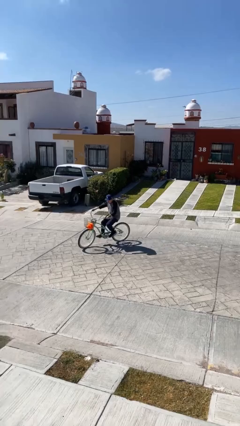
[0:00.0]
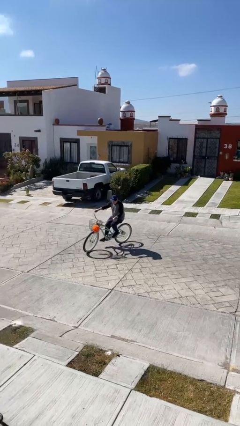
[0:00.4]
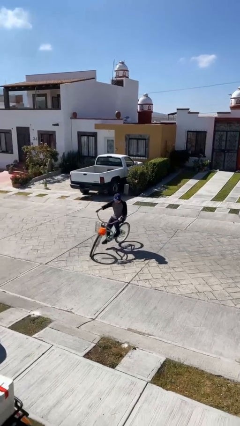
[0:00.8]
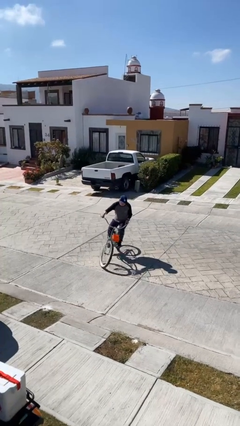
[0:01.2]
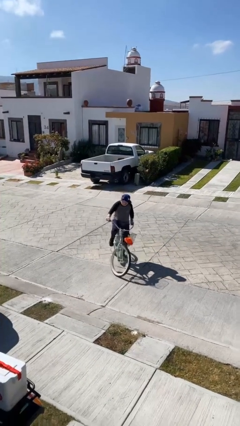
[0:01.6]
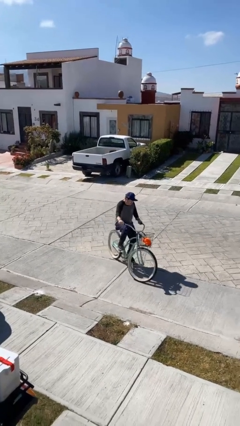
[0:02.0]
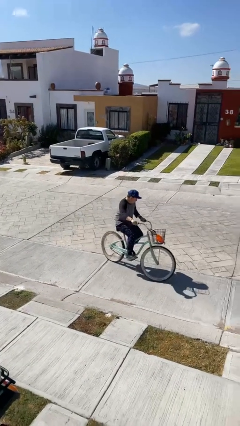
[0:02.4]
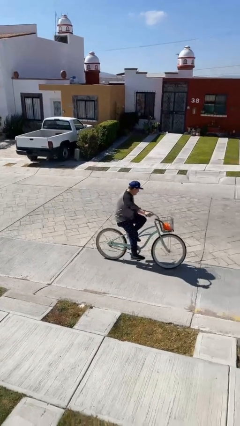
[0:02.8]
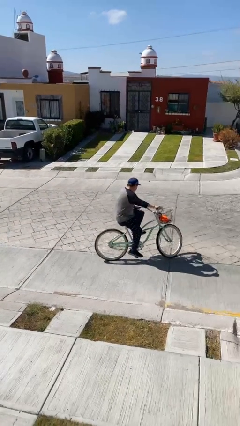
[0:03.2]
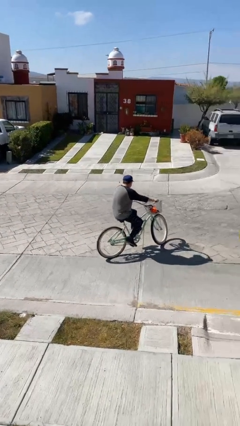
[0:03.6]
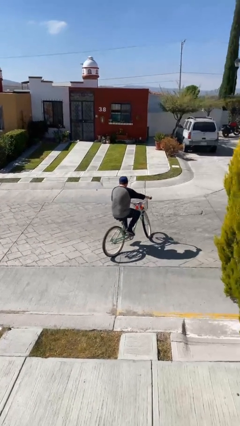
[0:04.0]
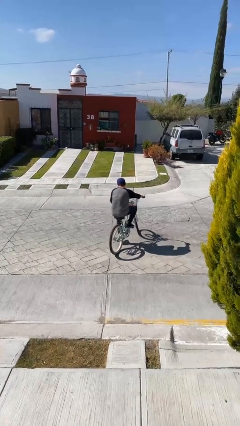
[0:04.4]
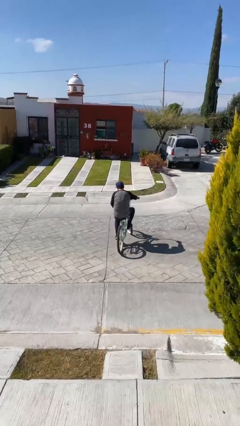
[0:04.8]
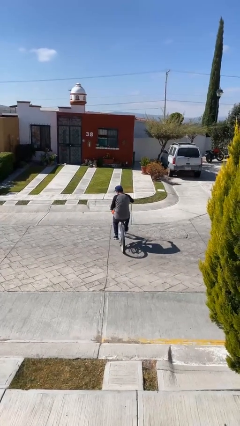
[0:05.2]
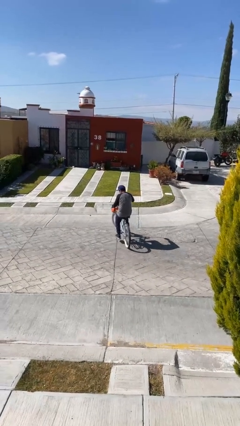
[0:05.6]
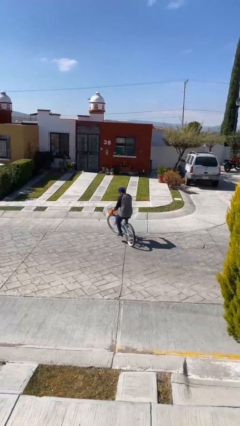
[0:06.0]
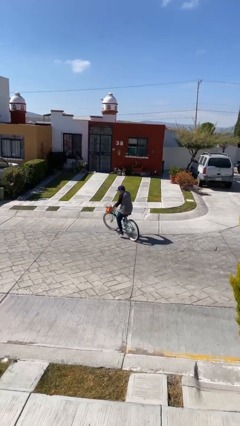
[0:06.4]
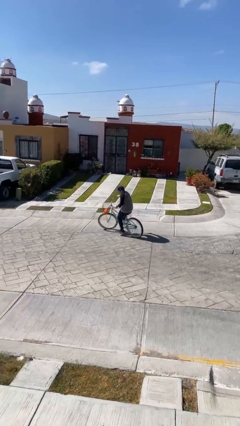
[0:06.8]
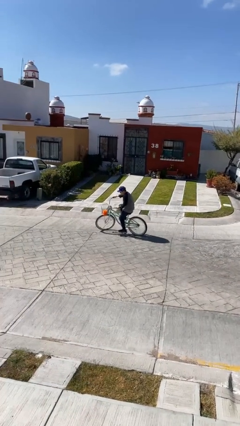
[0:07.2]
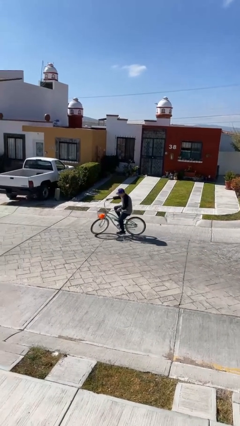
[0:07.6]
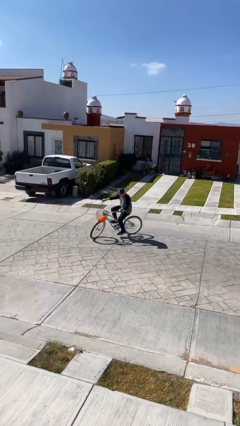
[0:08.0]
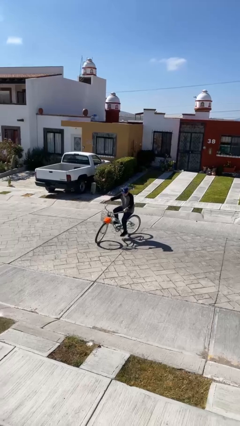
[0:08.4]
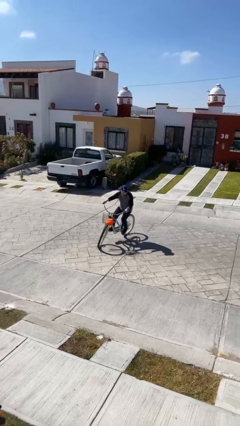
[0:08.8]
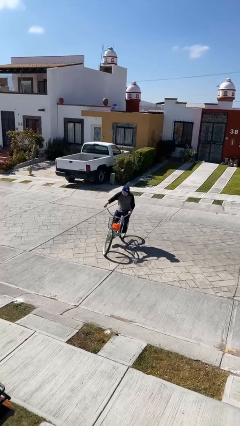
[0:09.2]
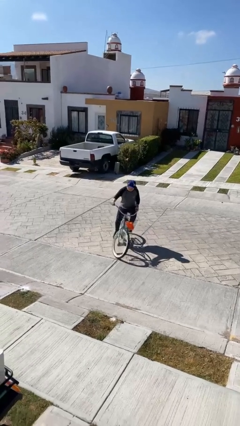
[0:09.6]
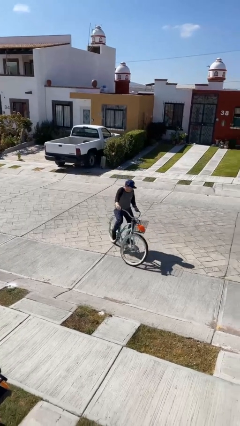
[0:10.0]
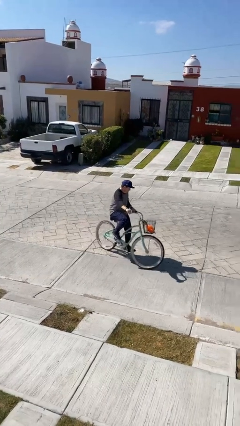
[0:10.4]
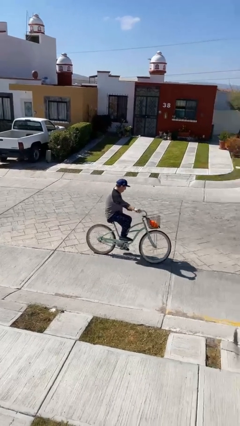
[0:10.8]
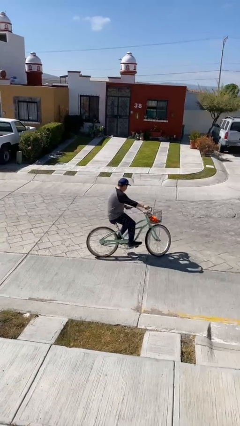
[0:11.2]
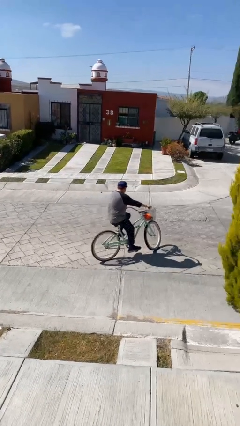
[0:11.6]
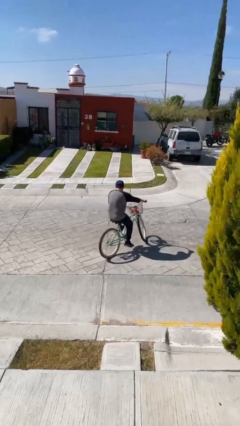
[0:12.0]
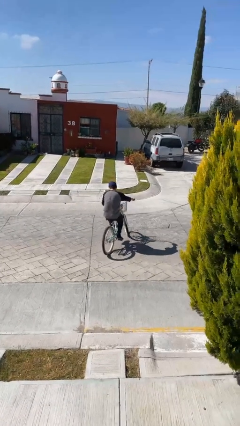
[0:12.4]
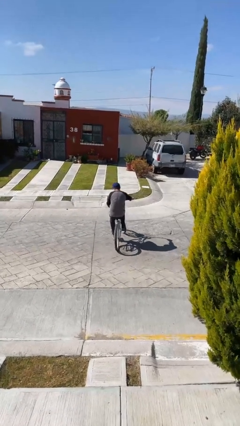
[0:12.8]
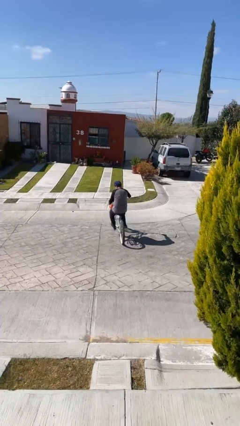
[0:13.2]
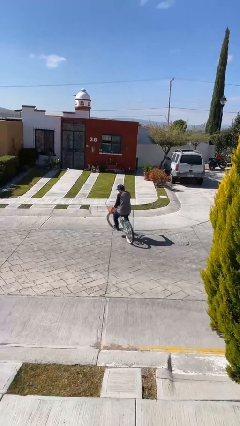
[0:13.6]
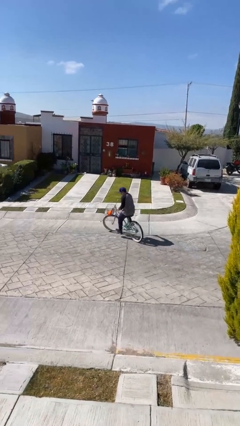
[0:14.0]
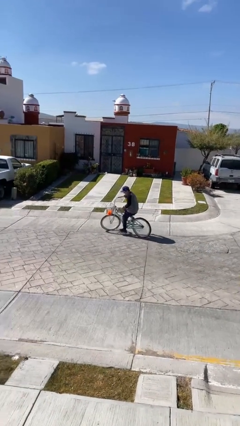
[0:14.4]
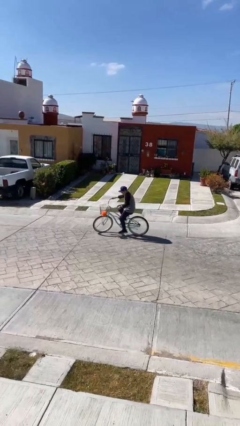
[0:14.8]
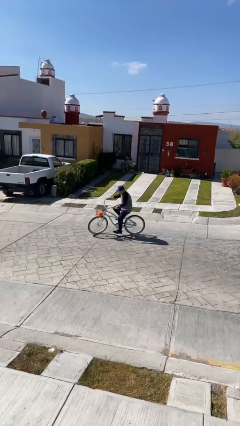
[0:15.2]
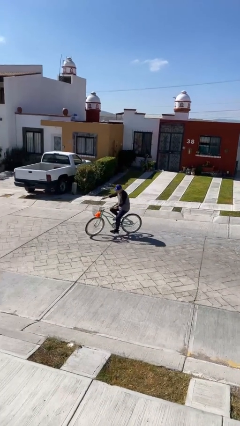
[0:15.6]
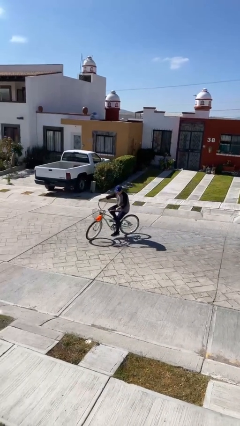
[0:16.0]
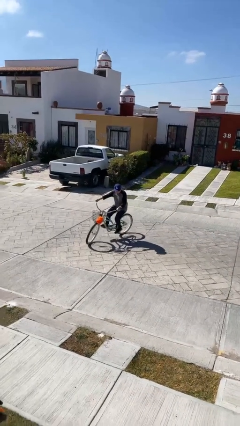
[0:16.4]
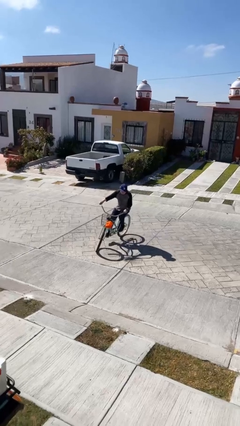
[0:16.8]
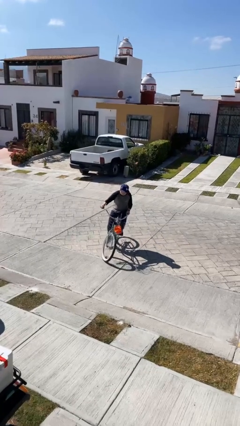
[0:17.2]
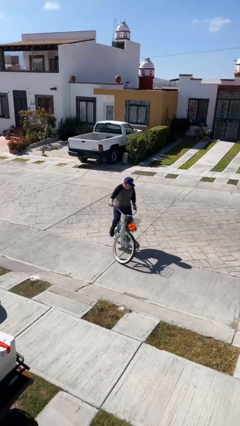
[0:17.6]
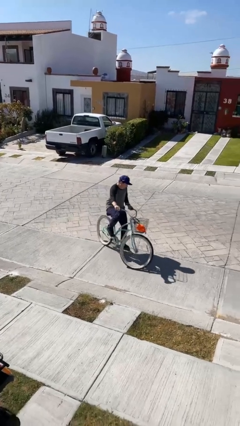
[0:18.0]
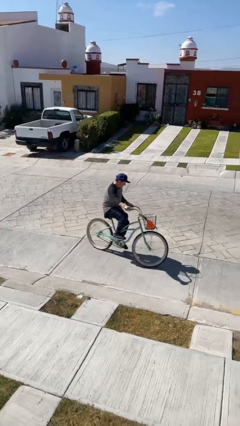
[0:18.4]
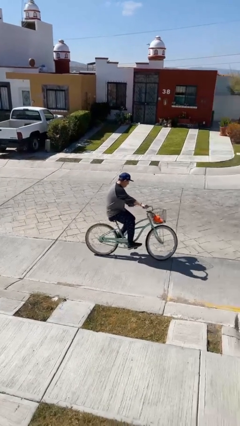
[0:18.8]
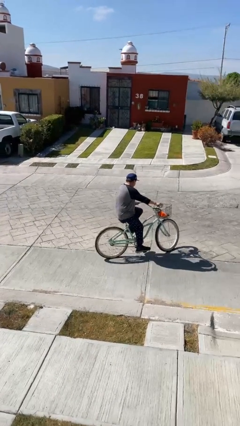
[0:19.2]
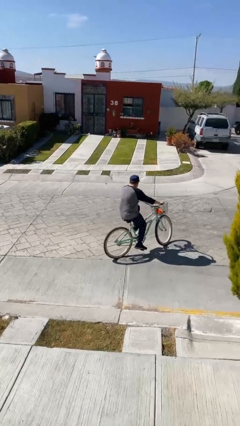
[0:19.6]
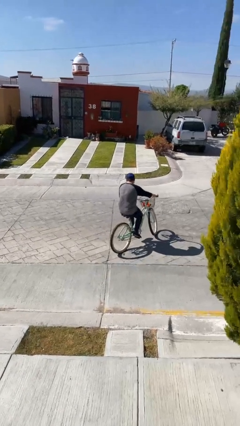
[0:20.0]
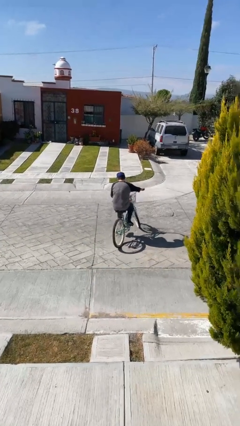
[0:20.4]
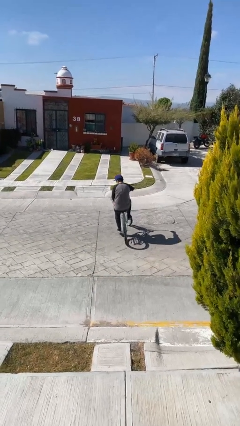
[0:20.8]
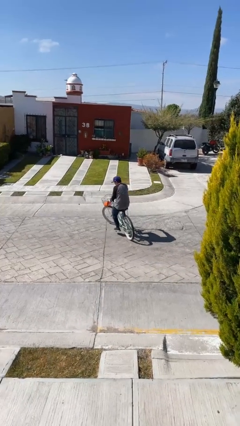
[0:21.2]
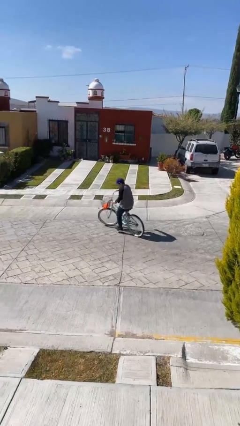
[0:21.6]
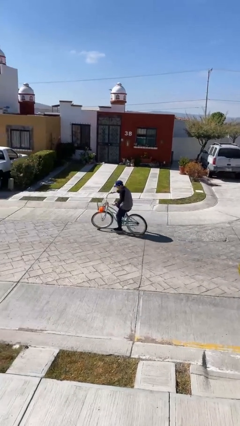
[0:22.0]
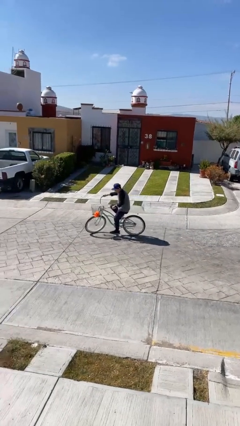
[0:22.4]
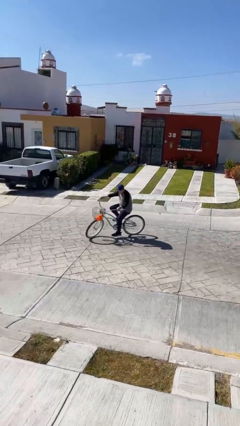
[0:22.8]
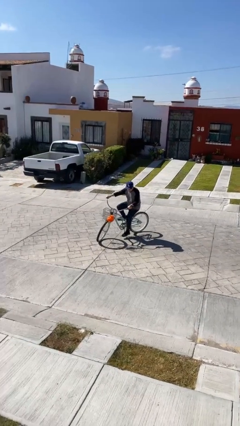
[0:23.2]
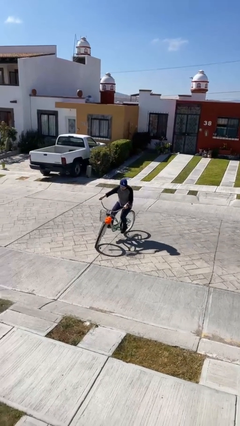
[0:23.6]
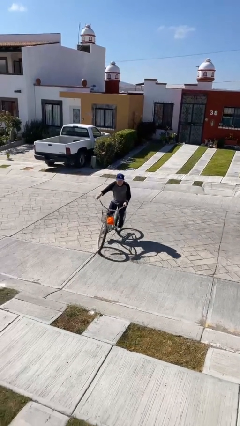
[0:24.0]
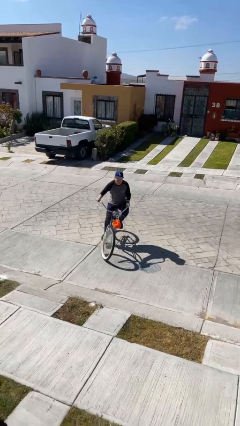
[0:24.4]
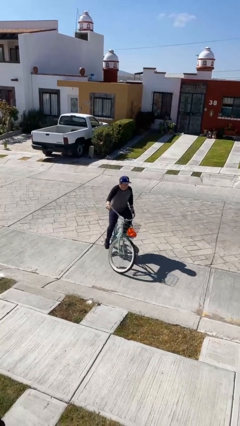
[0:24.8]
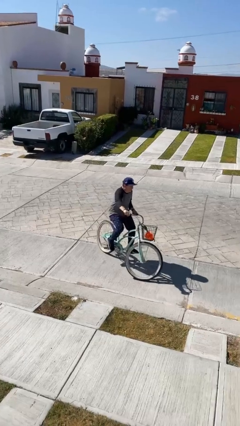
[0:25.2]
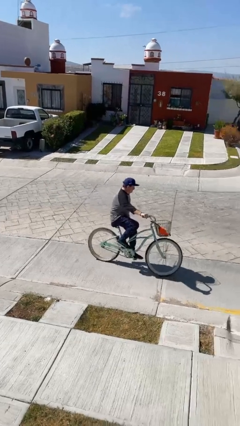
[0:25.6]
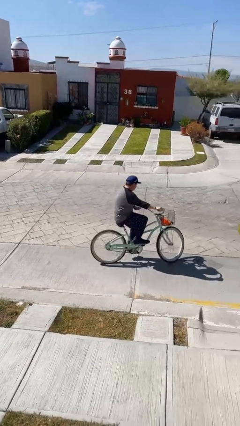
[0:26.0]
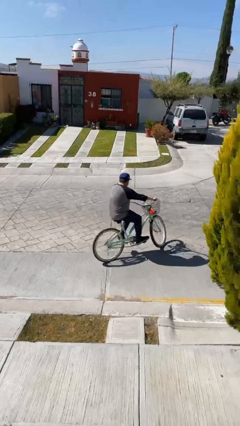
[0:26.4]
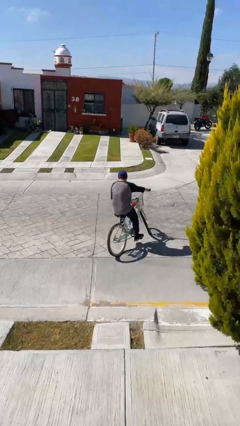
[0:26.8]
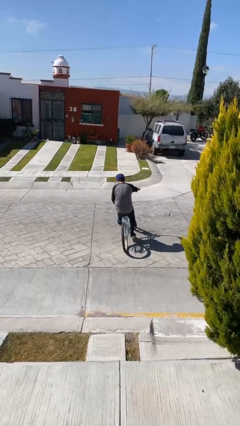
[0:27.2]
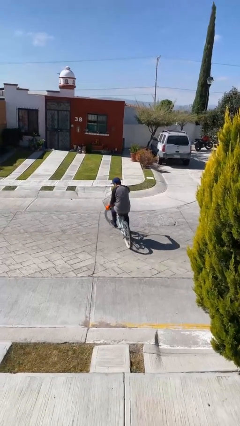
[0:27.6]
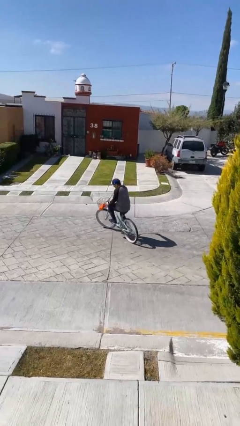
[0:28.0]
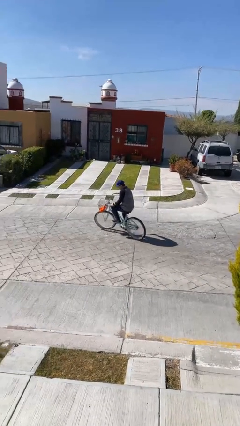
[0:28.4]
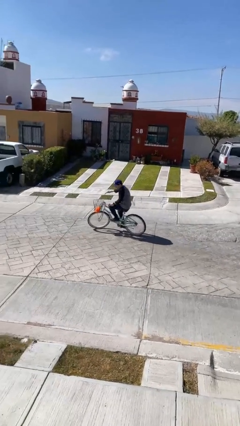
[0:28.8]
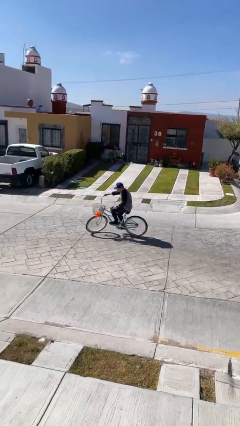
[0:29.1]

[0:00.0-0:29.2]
person rides bicycle

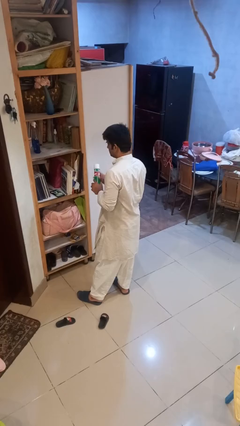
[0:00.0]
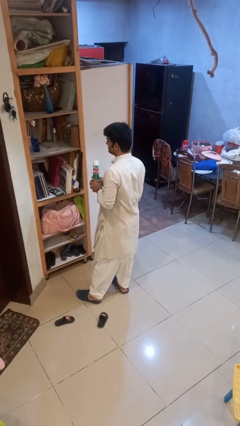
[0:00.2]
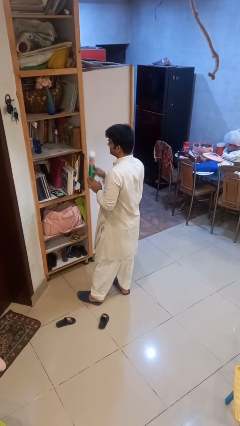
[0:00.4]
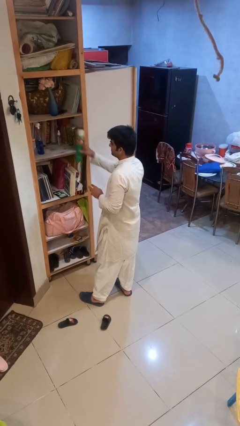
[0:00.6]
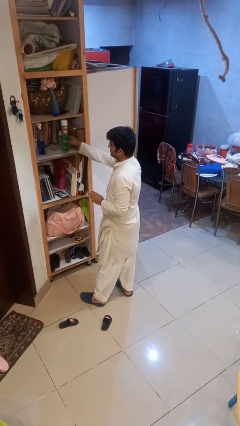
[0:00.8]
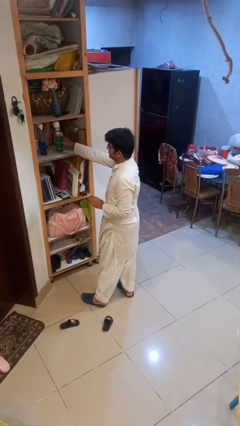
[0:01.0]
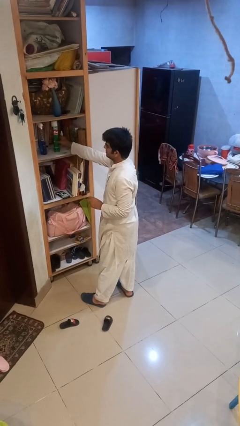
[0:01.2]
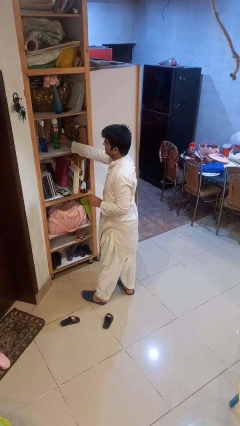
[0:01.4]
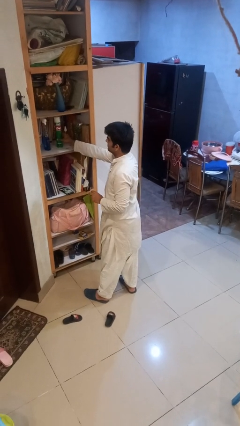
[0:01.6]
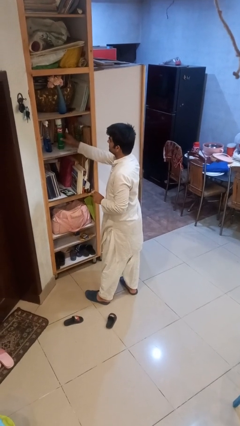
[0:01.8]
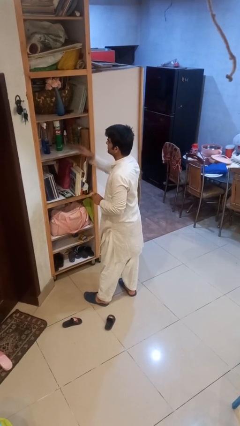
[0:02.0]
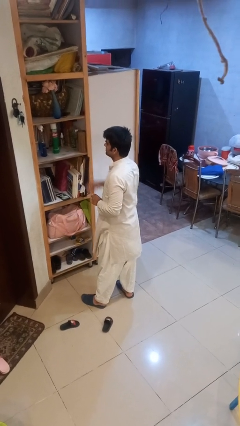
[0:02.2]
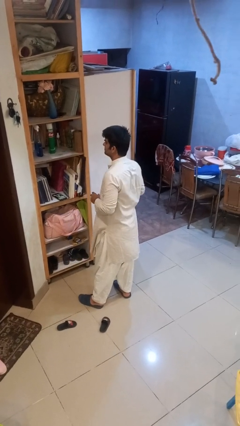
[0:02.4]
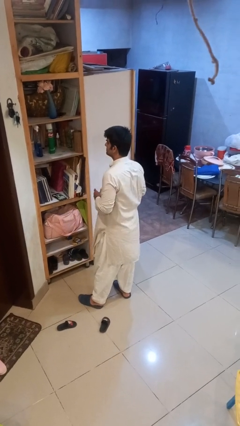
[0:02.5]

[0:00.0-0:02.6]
person puts down object on shelf

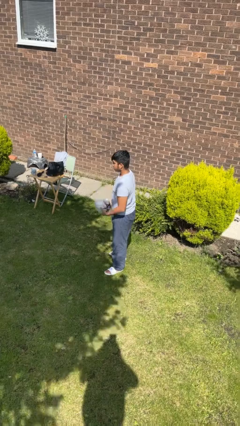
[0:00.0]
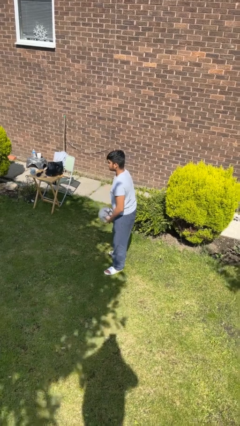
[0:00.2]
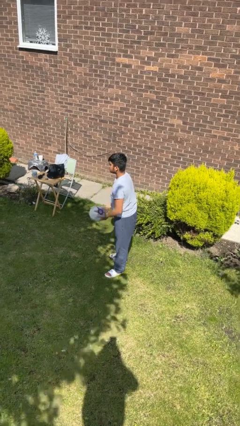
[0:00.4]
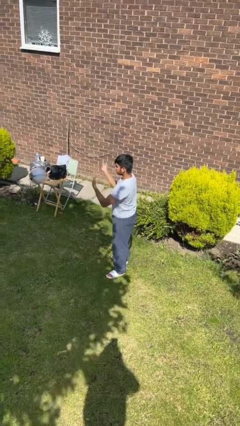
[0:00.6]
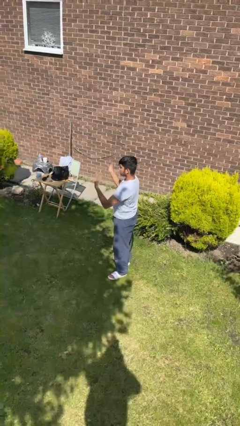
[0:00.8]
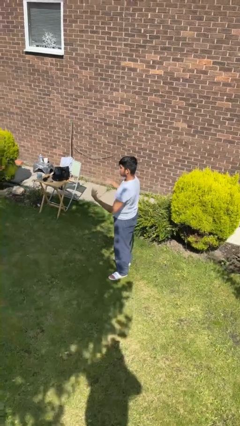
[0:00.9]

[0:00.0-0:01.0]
person throws object to person
